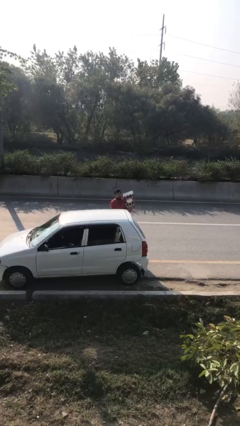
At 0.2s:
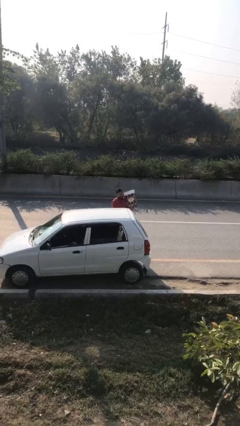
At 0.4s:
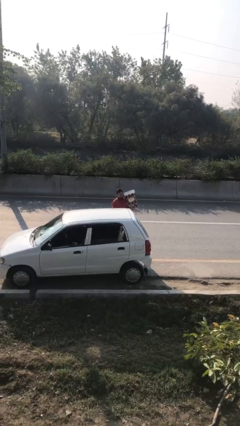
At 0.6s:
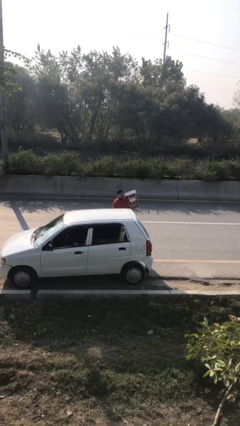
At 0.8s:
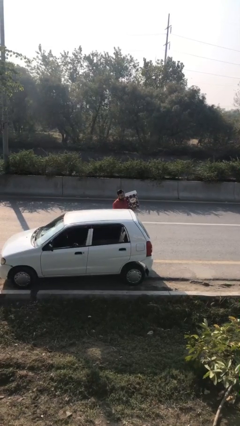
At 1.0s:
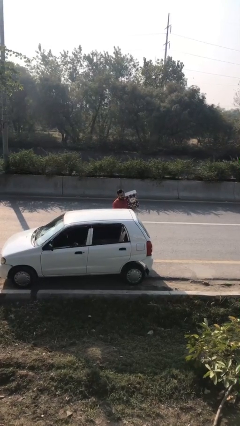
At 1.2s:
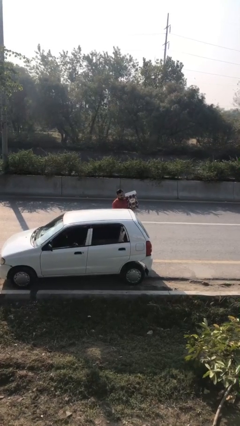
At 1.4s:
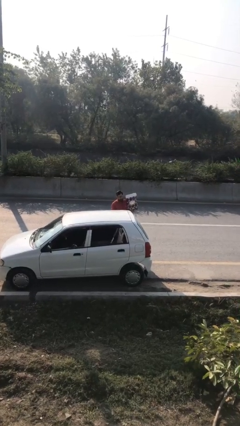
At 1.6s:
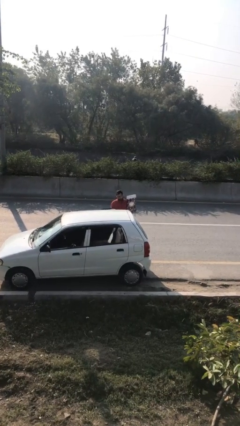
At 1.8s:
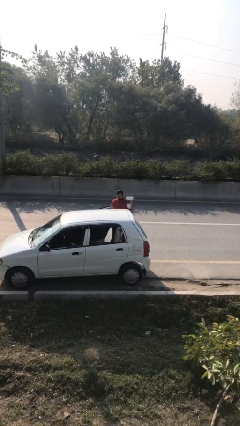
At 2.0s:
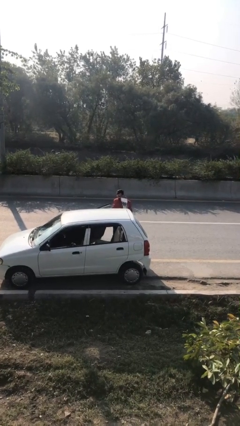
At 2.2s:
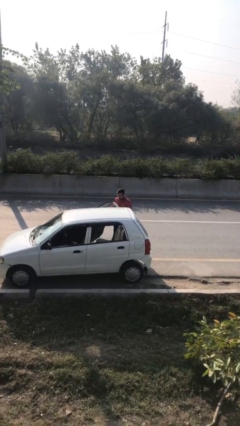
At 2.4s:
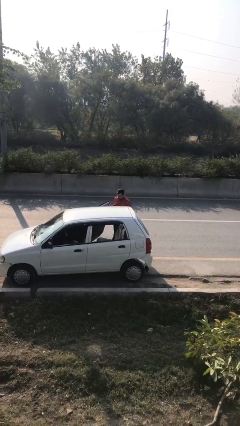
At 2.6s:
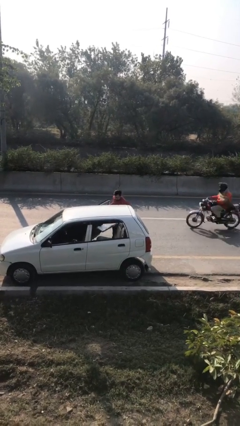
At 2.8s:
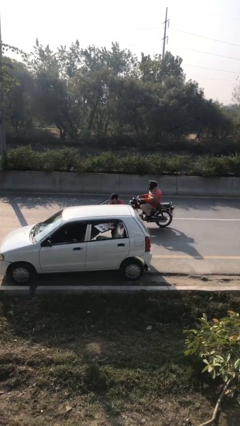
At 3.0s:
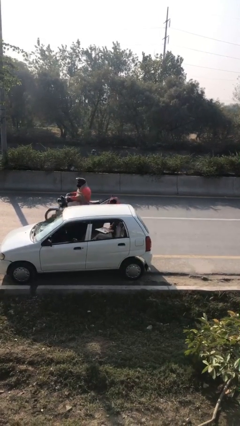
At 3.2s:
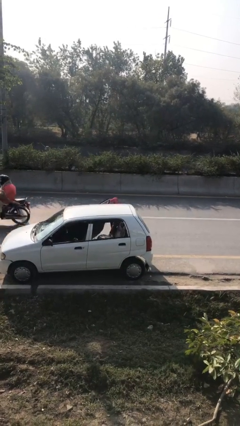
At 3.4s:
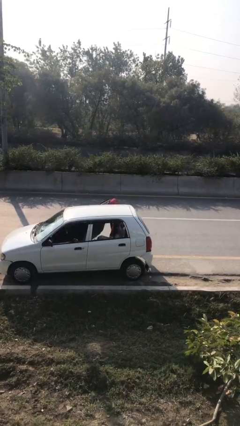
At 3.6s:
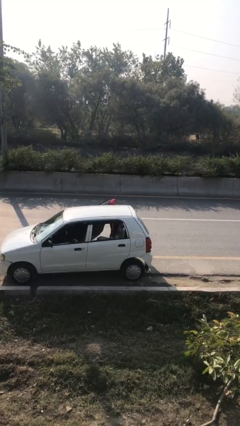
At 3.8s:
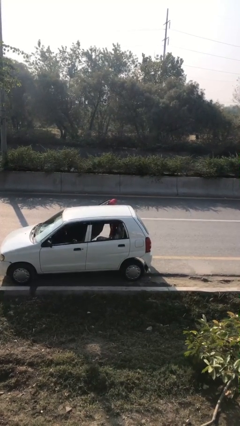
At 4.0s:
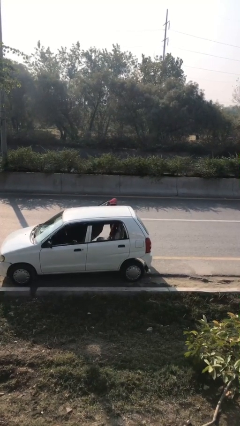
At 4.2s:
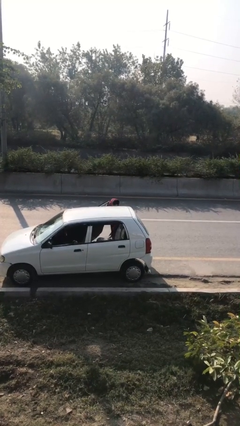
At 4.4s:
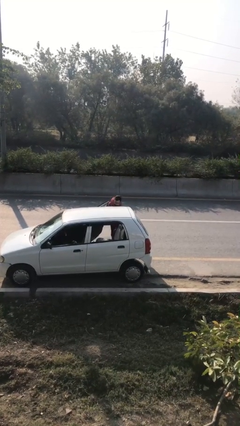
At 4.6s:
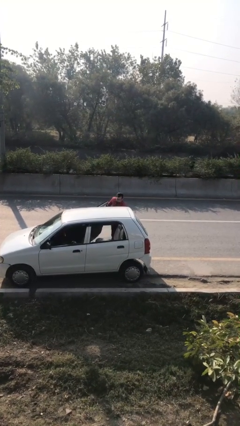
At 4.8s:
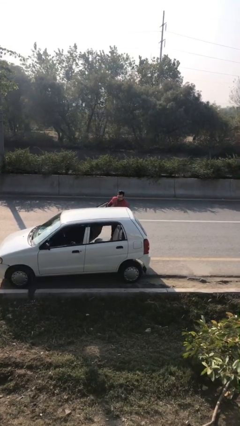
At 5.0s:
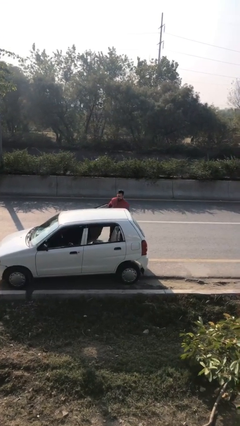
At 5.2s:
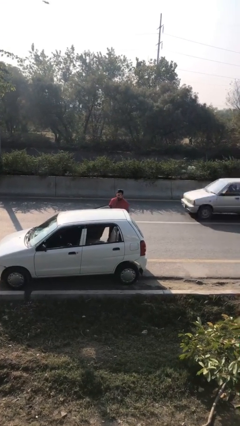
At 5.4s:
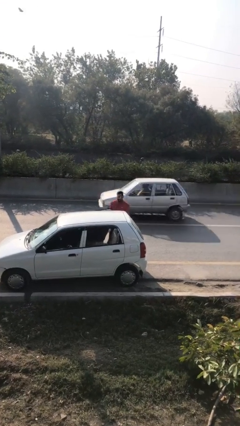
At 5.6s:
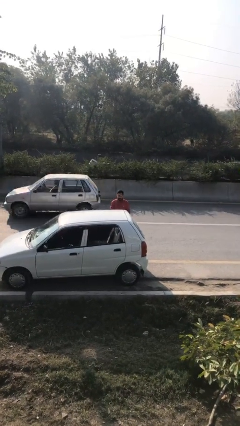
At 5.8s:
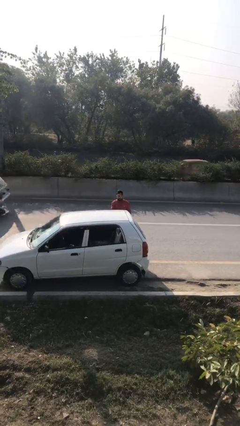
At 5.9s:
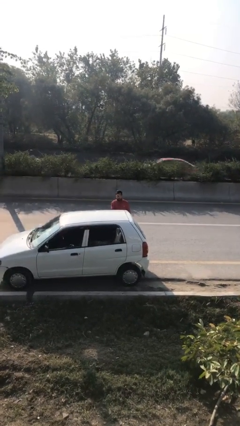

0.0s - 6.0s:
person loads car

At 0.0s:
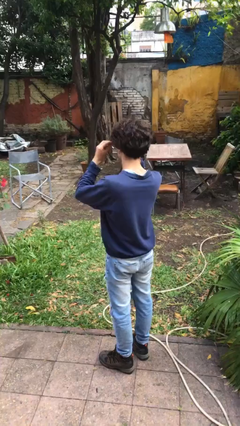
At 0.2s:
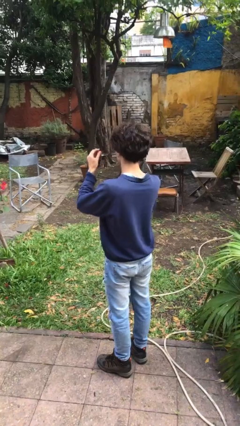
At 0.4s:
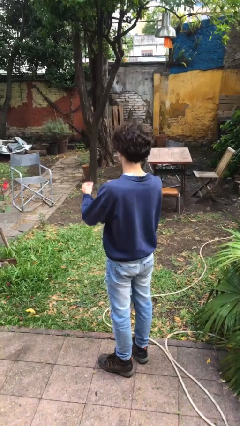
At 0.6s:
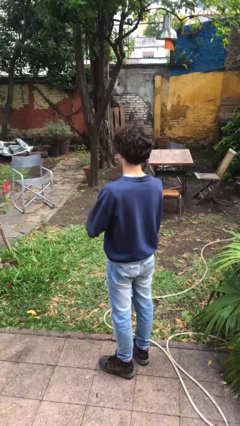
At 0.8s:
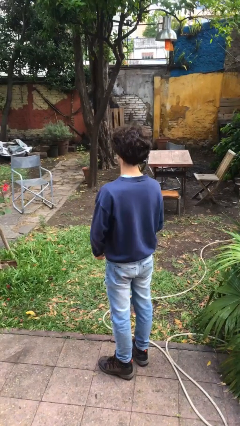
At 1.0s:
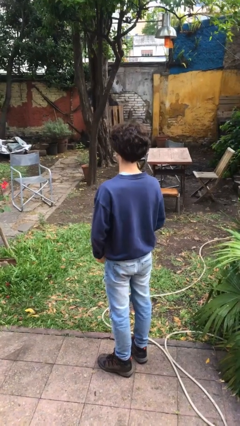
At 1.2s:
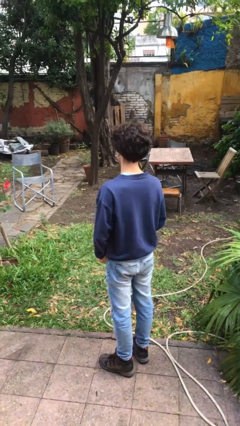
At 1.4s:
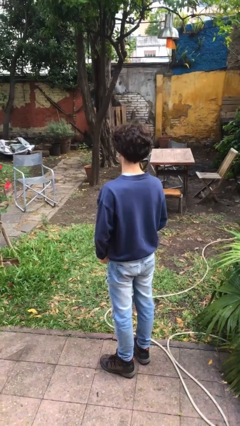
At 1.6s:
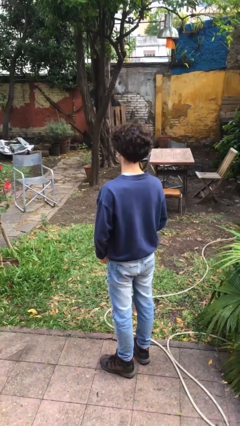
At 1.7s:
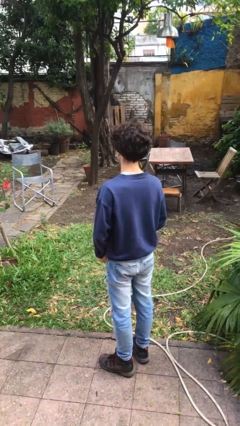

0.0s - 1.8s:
person takes off glasses

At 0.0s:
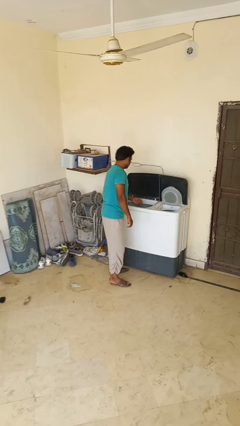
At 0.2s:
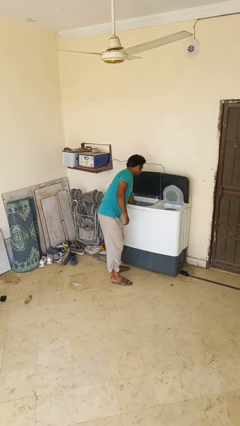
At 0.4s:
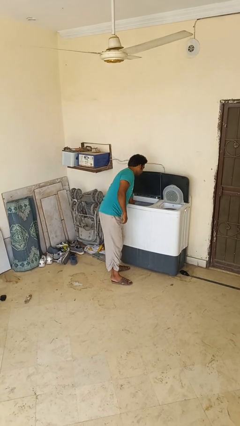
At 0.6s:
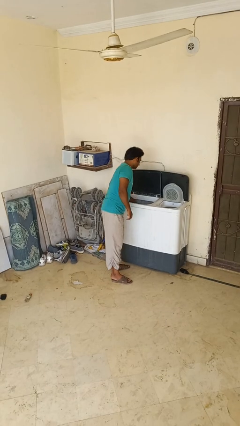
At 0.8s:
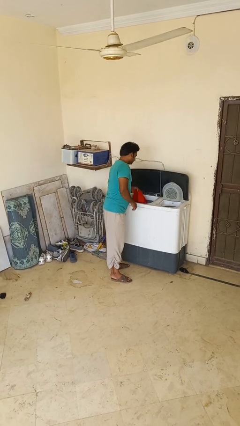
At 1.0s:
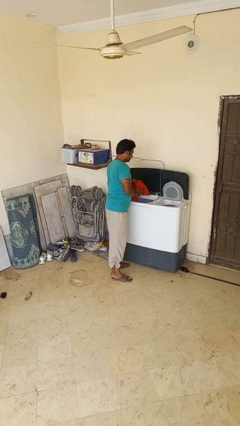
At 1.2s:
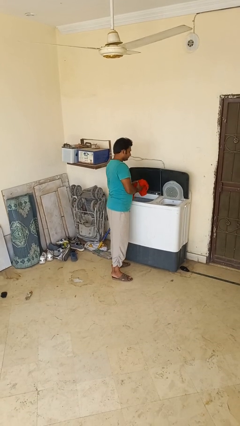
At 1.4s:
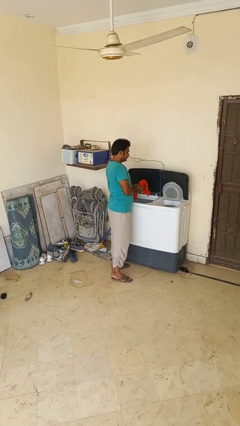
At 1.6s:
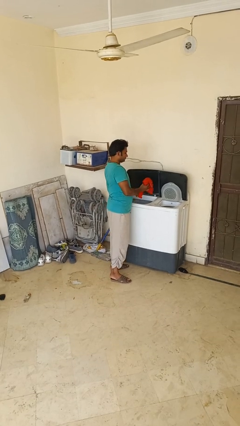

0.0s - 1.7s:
person unloads clotheswasher

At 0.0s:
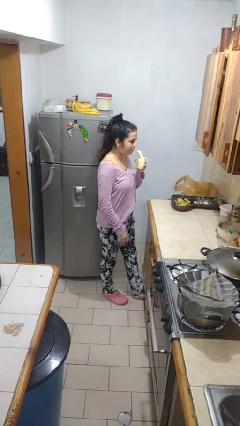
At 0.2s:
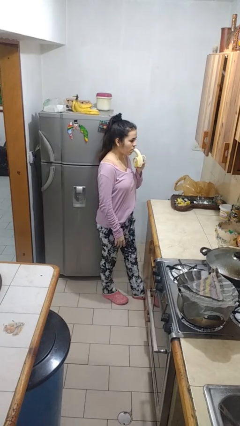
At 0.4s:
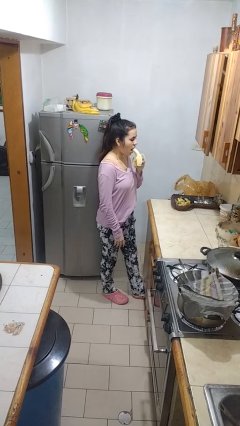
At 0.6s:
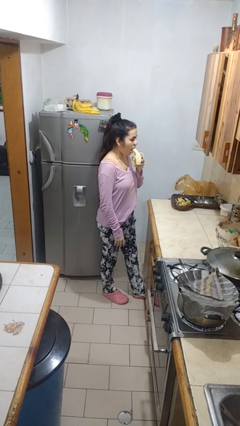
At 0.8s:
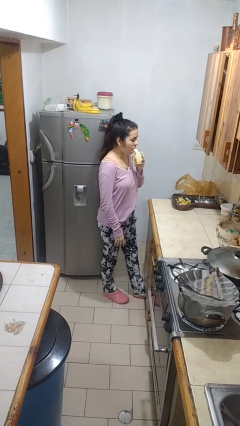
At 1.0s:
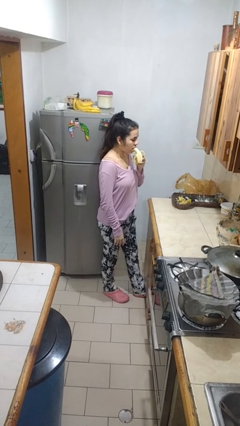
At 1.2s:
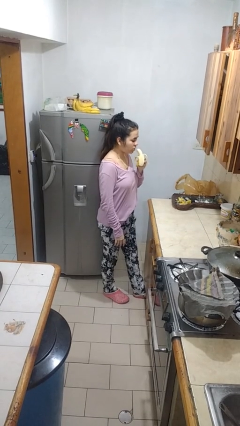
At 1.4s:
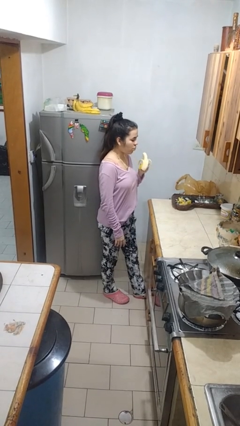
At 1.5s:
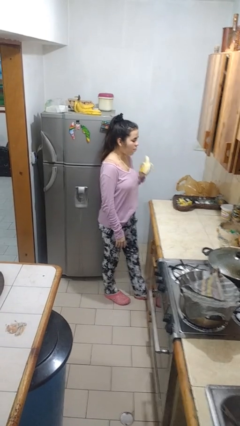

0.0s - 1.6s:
person eats banana

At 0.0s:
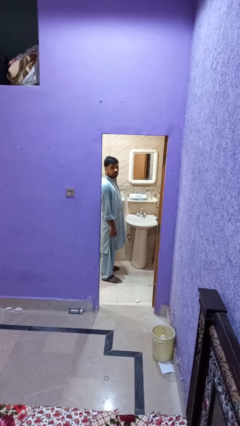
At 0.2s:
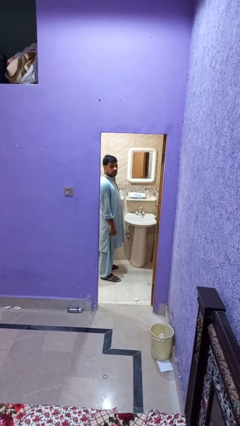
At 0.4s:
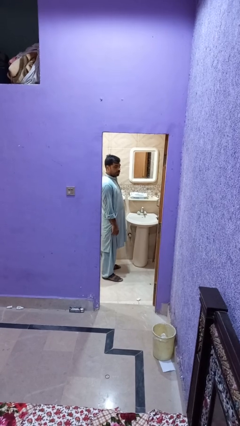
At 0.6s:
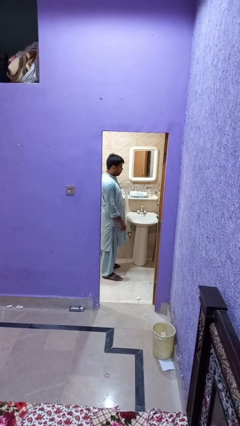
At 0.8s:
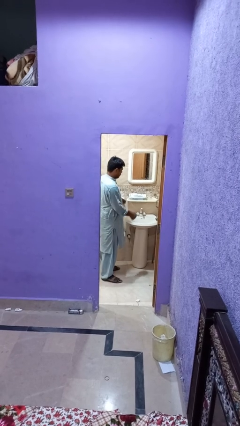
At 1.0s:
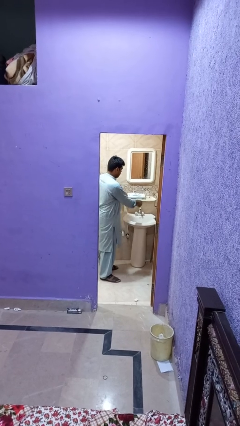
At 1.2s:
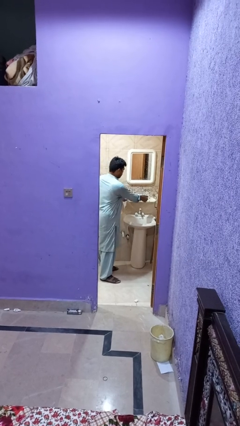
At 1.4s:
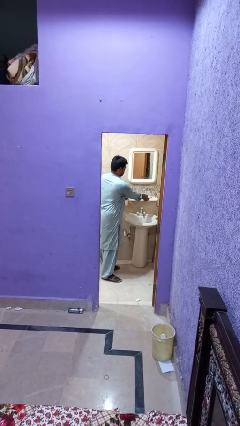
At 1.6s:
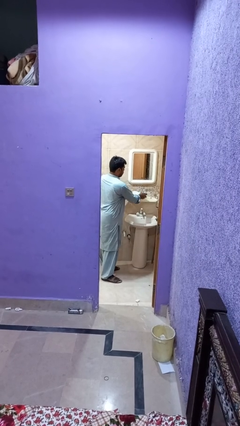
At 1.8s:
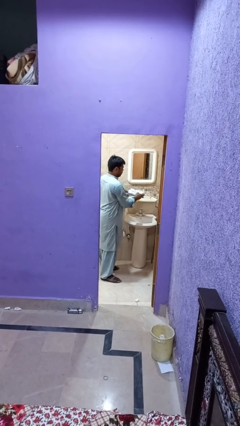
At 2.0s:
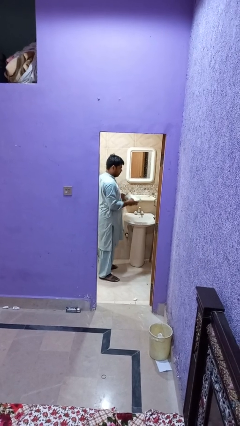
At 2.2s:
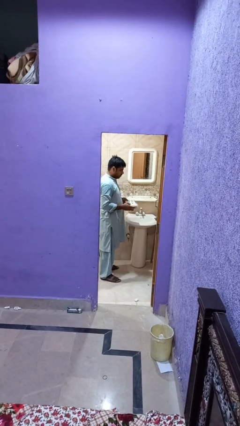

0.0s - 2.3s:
person picks up object from countertop

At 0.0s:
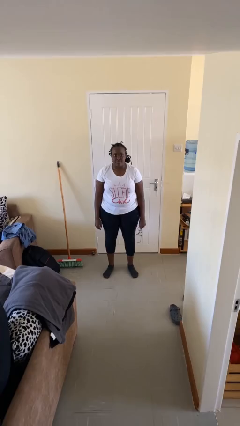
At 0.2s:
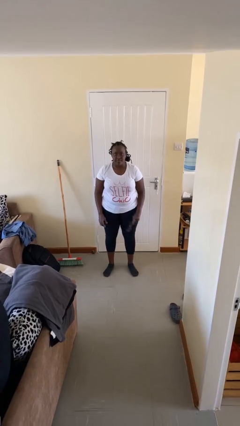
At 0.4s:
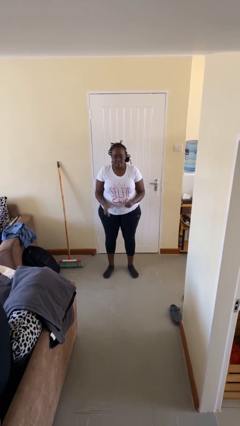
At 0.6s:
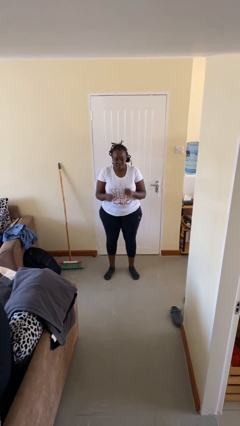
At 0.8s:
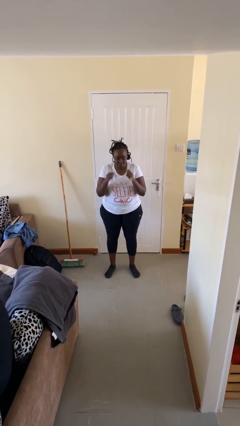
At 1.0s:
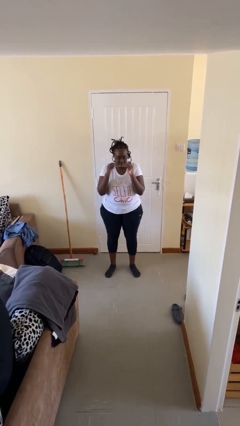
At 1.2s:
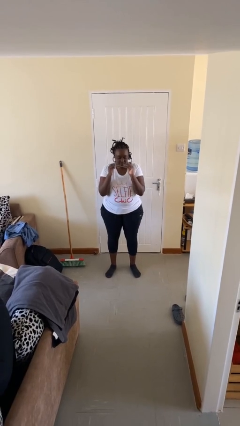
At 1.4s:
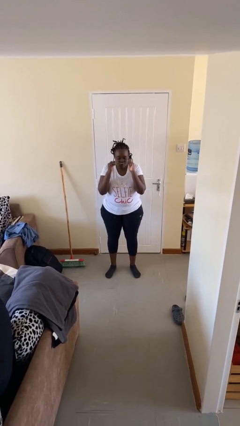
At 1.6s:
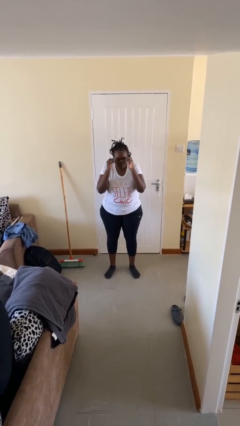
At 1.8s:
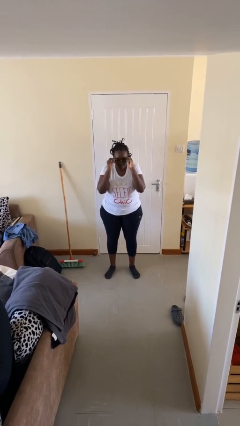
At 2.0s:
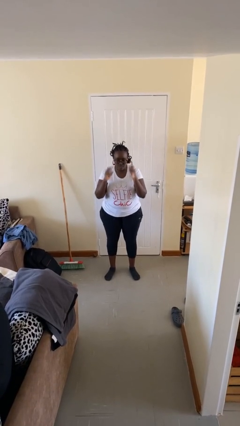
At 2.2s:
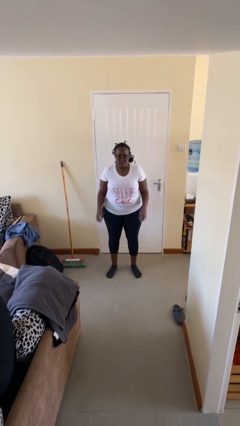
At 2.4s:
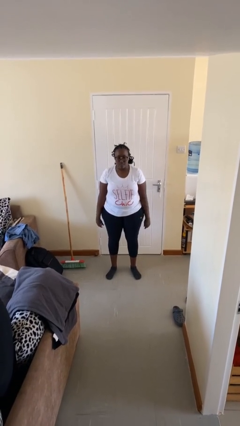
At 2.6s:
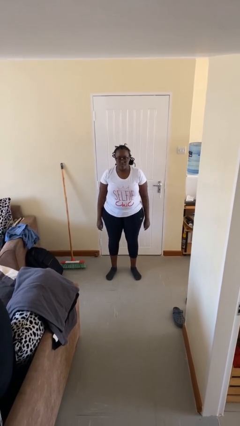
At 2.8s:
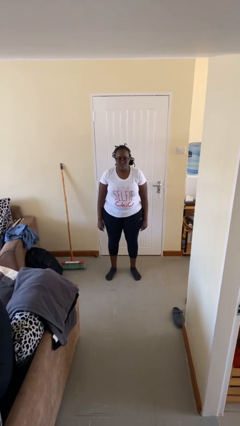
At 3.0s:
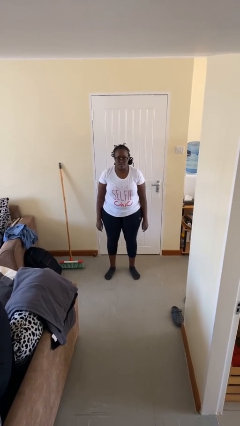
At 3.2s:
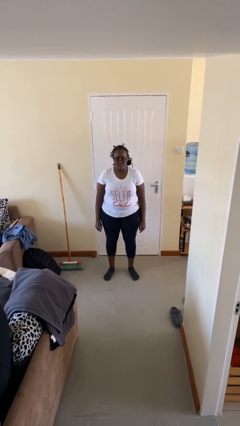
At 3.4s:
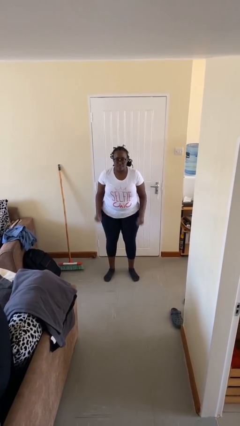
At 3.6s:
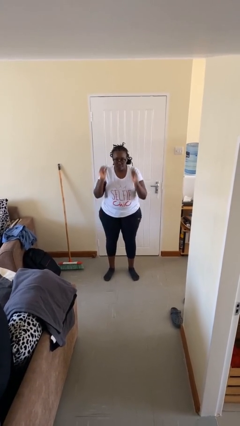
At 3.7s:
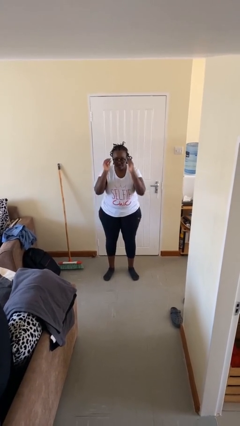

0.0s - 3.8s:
person puts on glasses

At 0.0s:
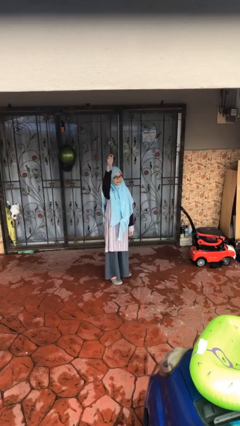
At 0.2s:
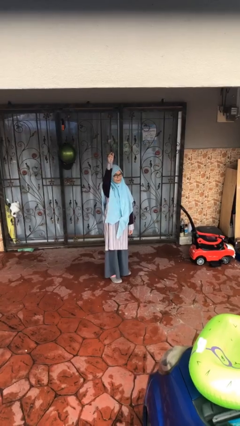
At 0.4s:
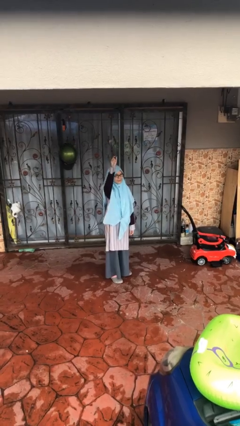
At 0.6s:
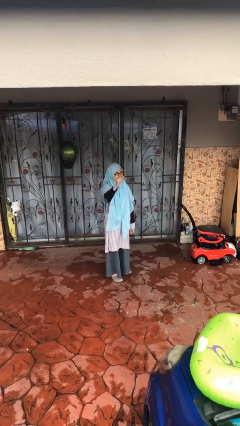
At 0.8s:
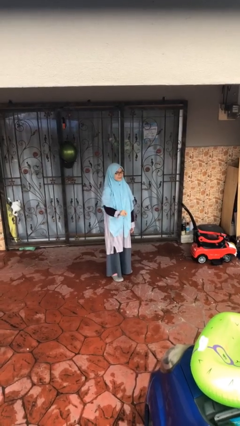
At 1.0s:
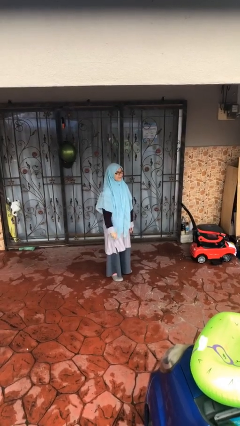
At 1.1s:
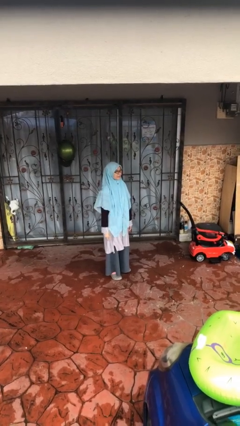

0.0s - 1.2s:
person gestures lower hand
